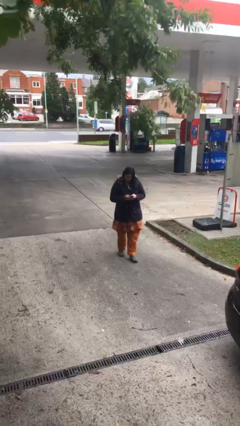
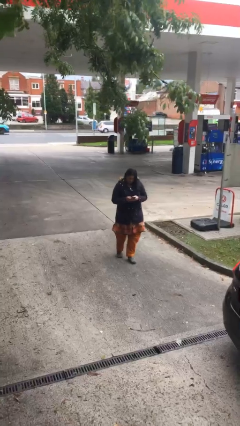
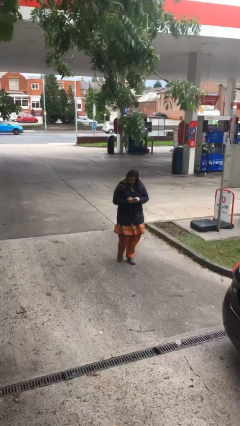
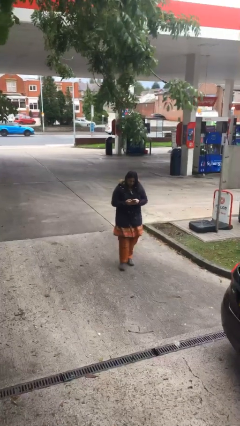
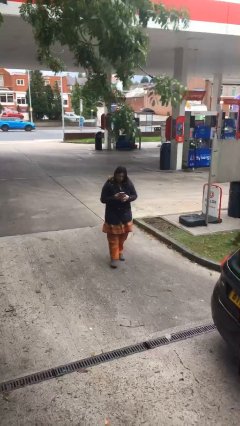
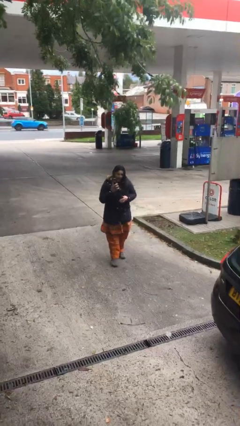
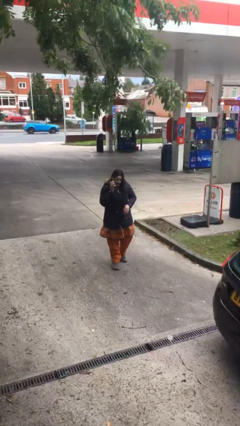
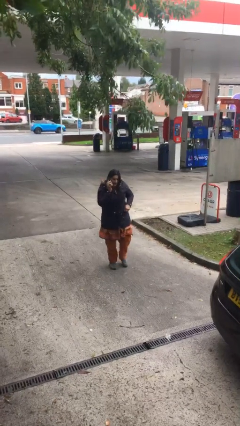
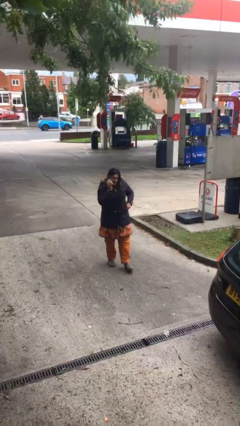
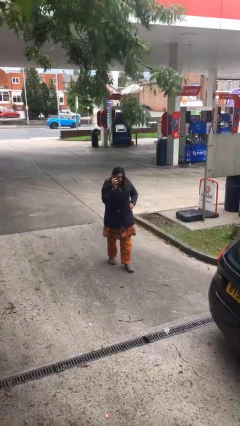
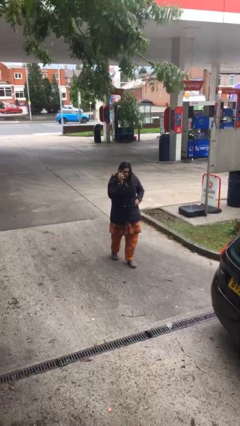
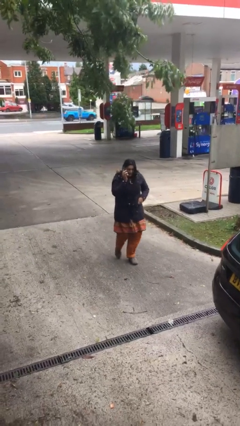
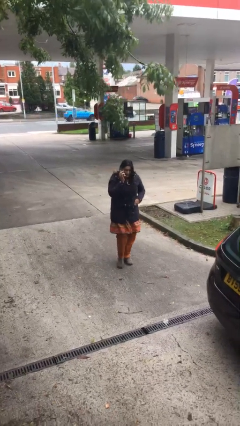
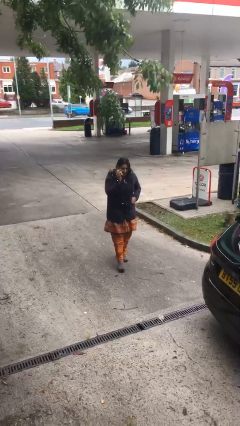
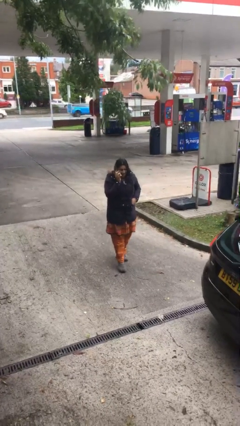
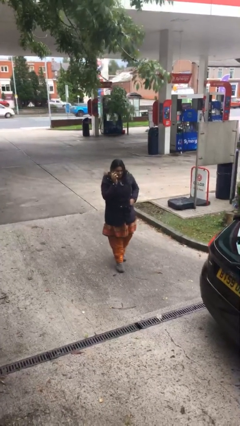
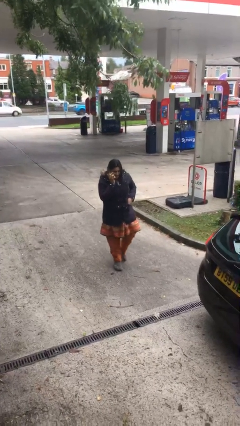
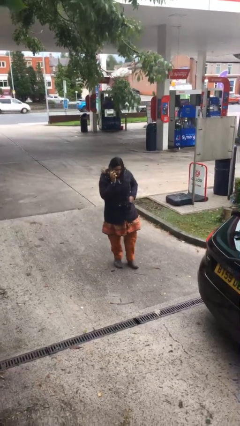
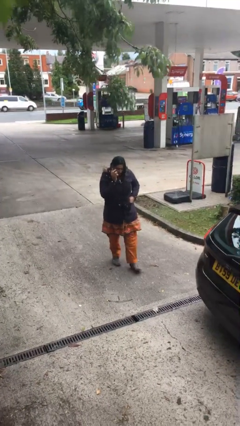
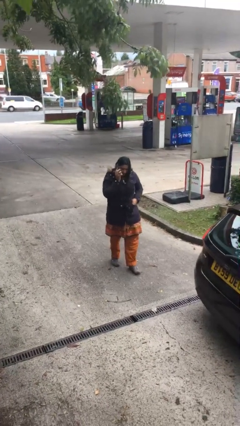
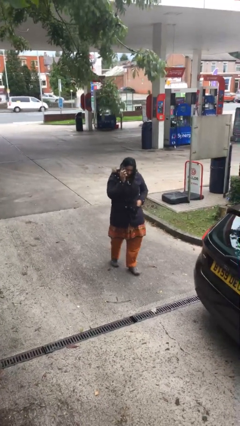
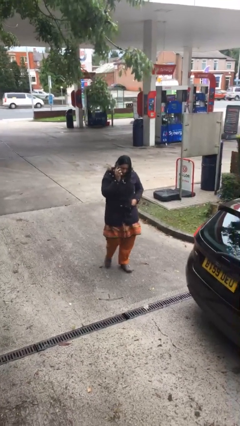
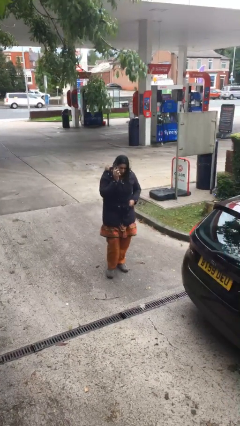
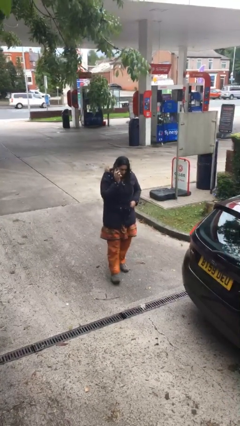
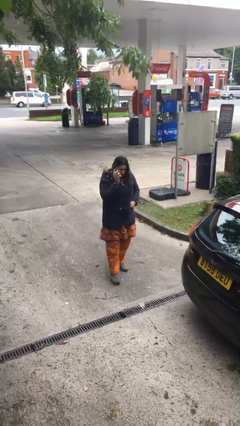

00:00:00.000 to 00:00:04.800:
person talks on phone

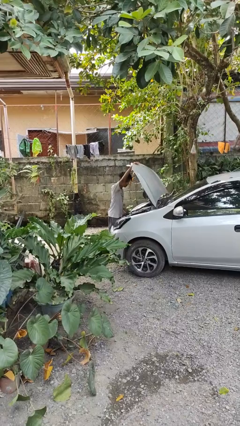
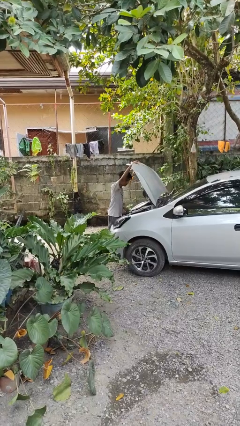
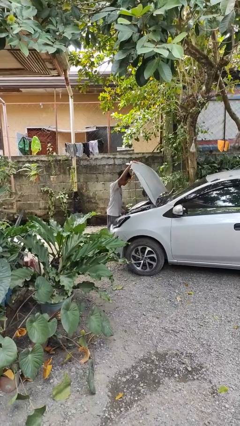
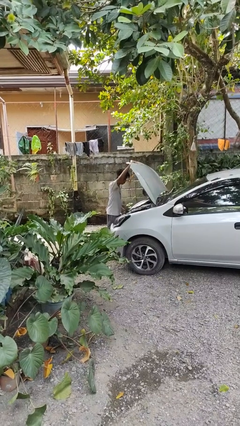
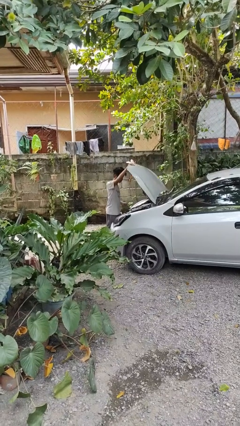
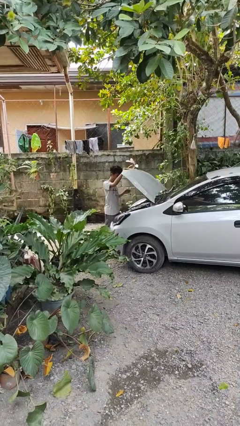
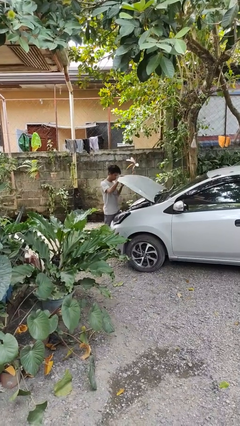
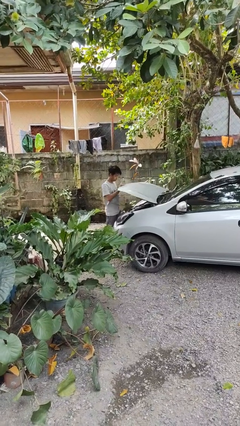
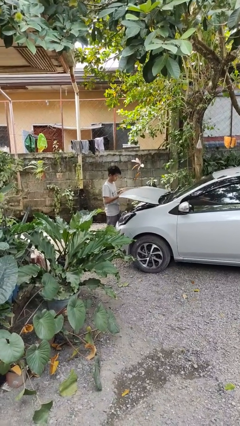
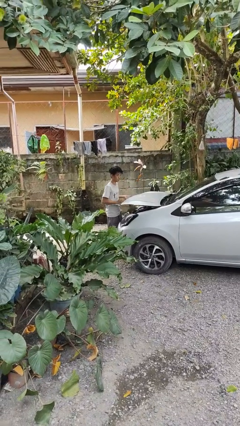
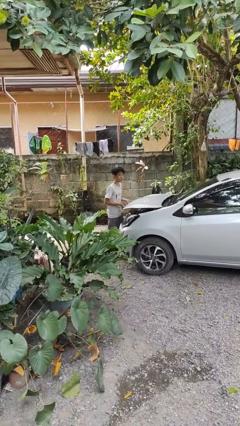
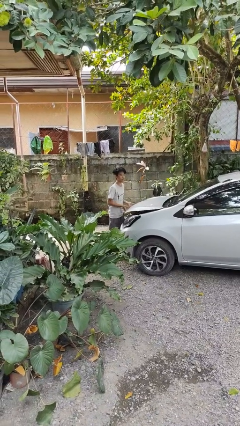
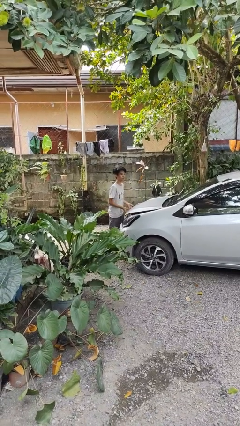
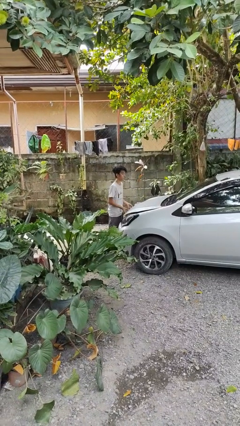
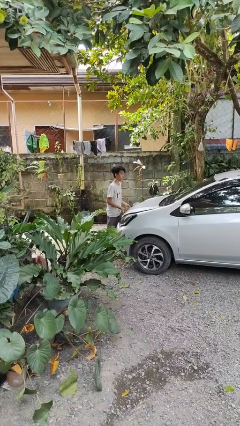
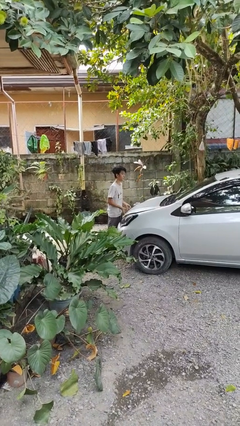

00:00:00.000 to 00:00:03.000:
person closes car hood

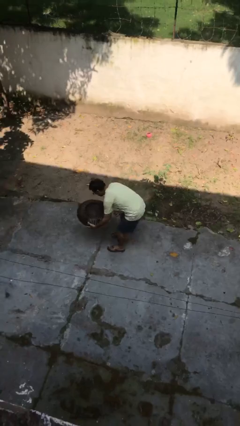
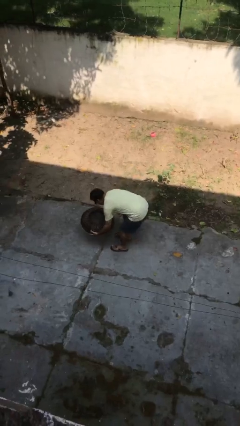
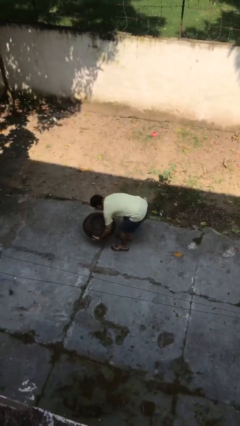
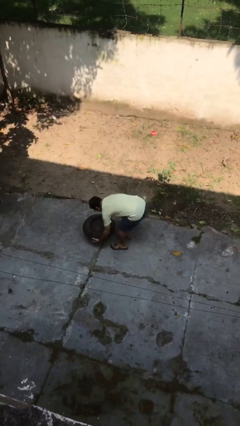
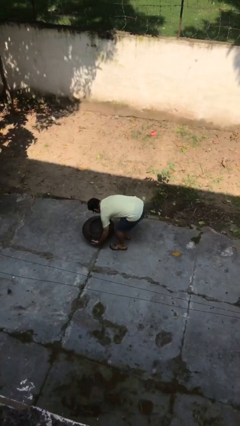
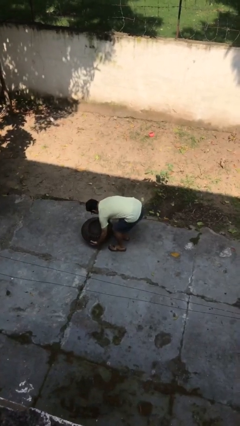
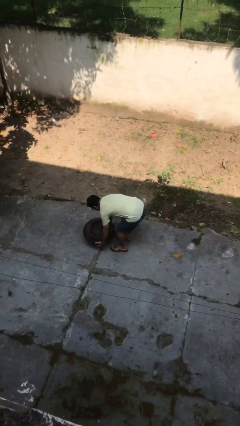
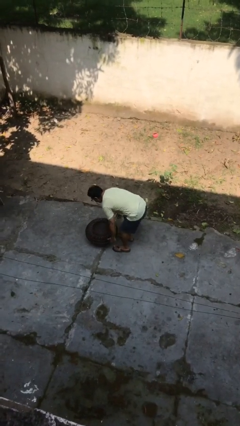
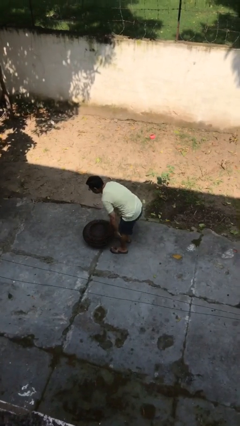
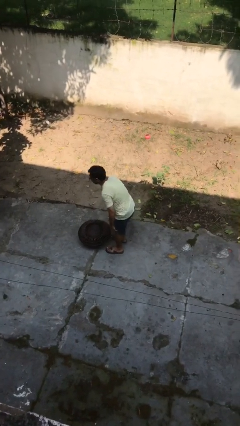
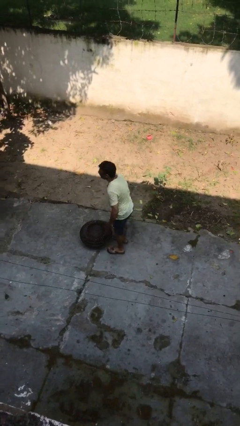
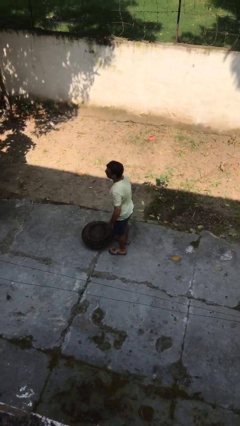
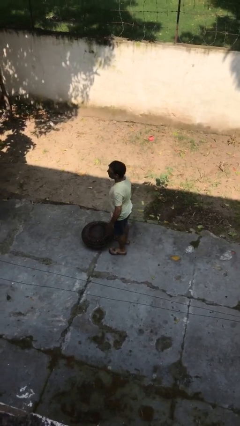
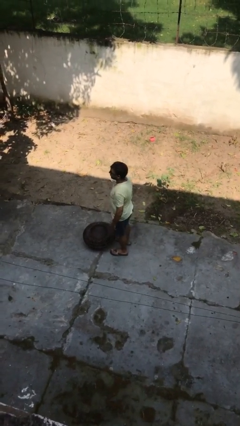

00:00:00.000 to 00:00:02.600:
person puts down object on floor

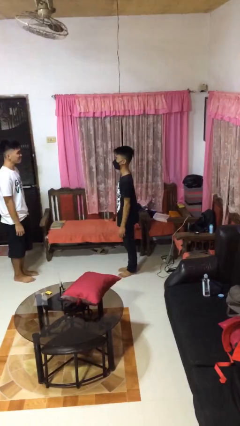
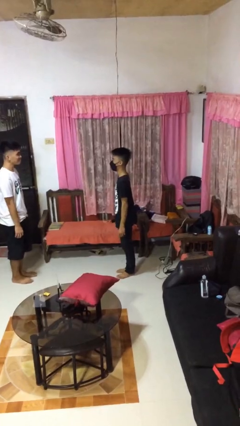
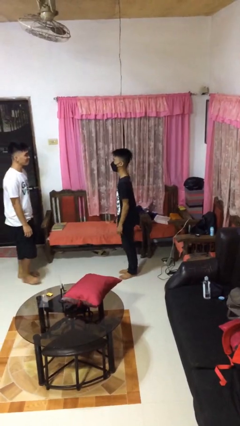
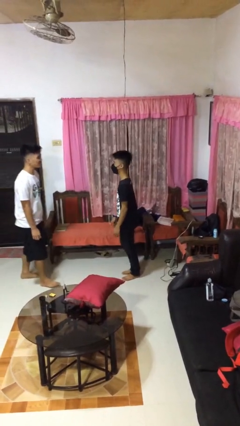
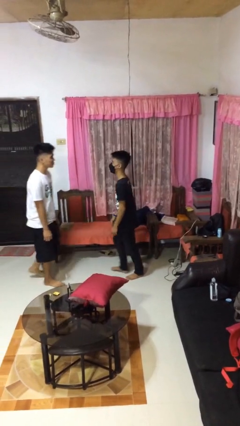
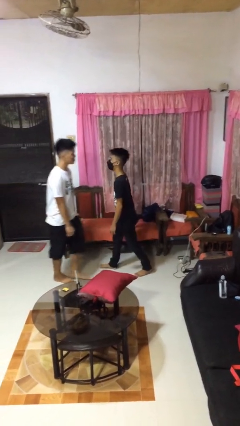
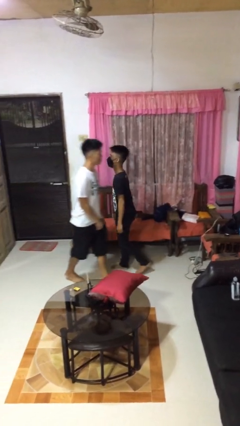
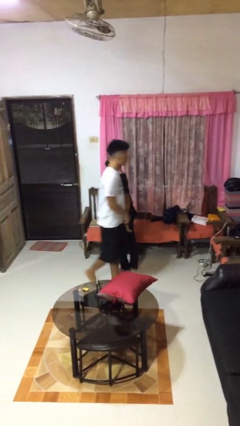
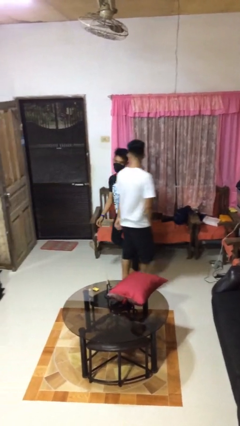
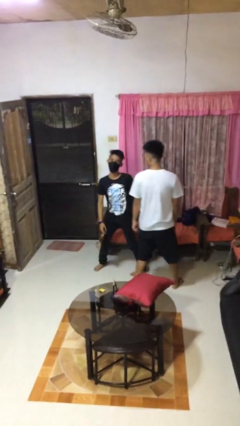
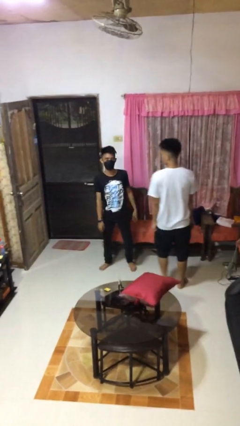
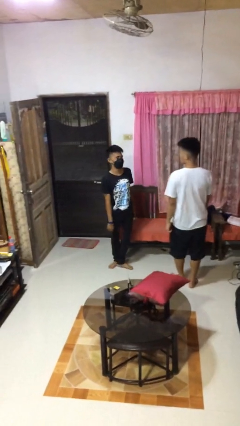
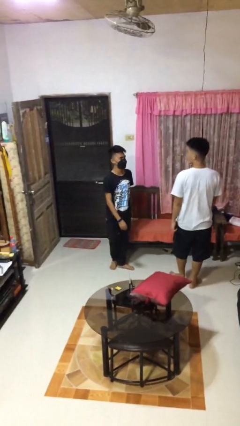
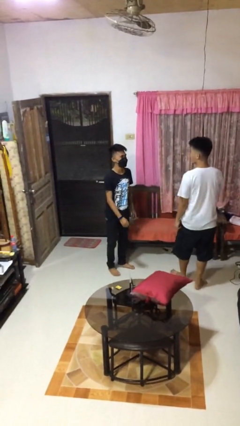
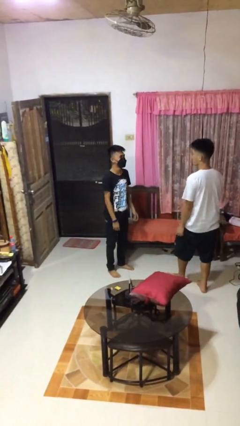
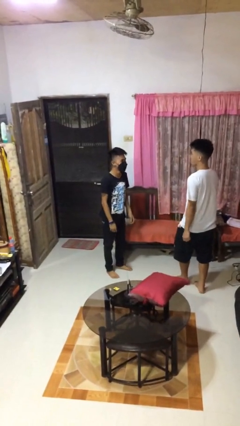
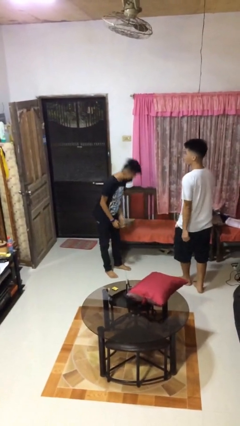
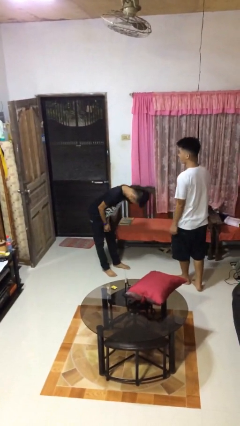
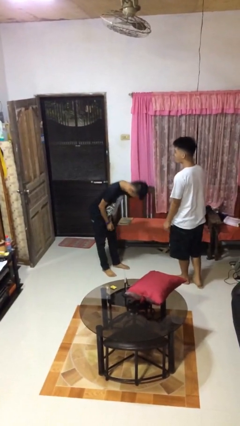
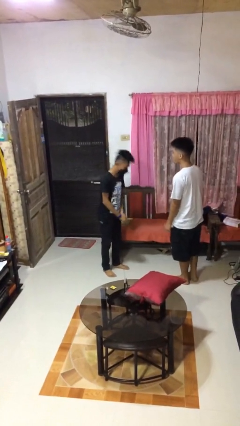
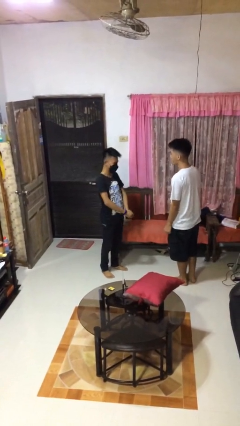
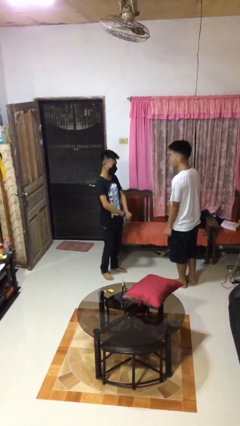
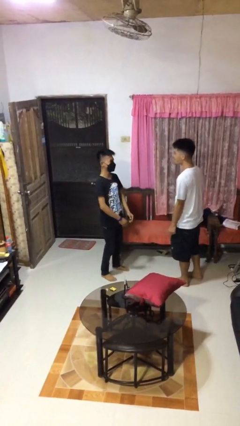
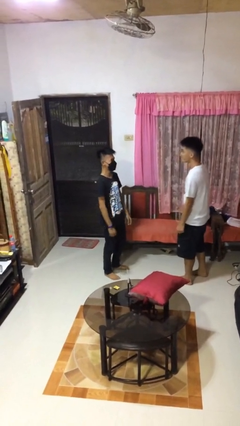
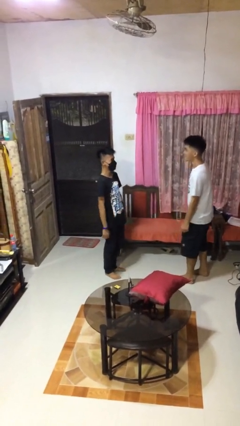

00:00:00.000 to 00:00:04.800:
person bumps into person

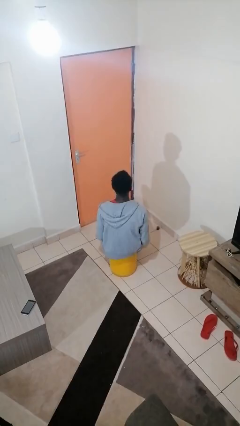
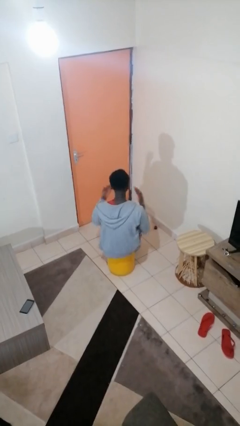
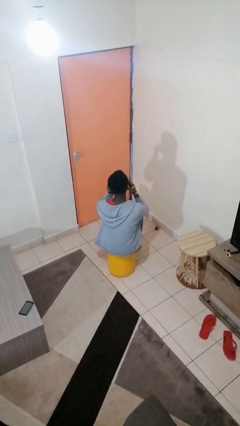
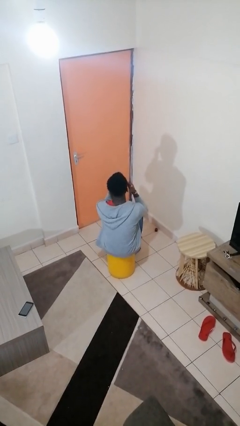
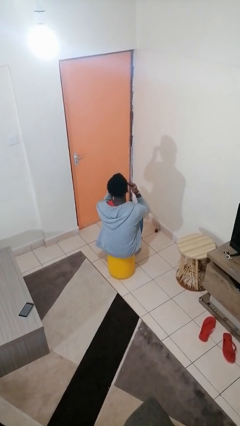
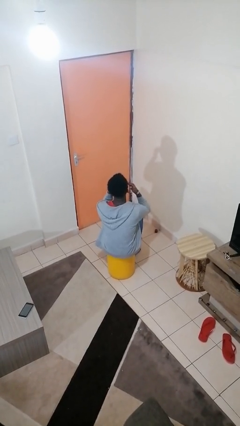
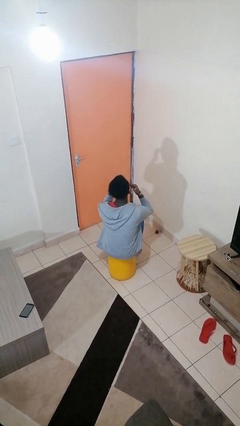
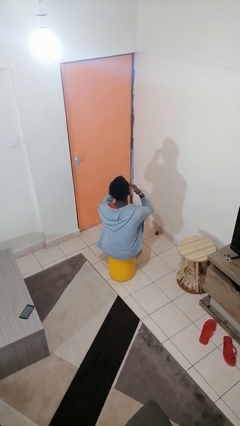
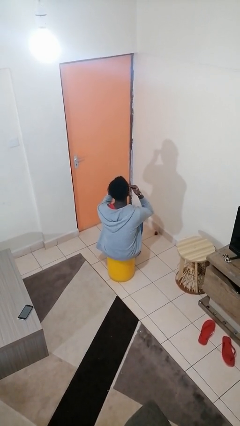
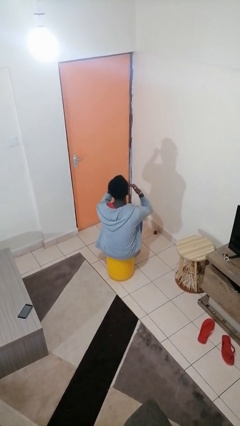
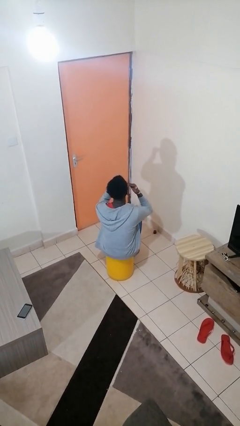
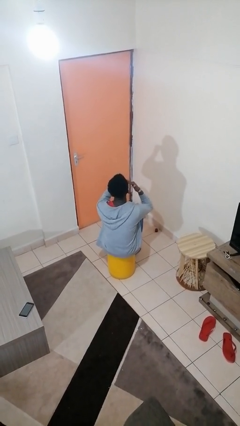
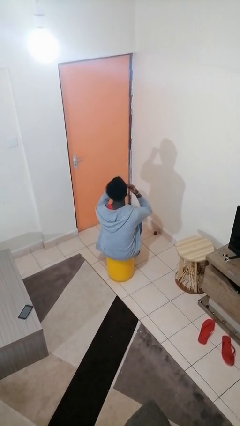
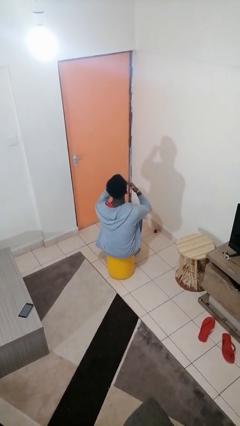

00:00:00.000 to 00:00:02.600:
person rubs eyes
